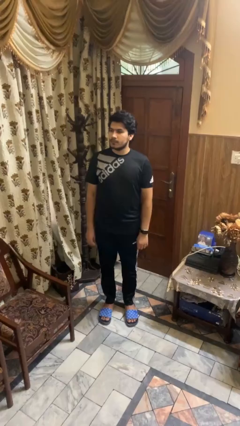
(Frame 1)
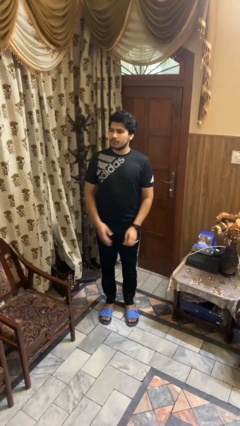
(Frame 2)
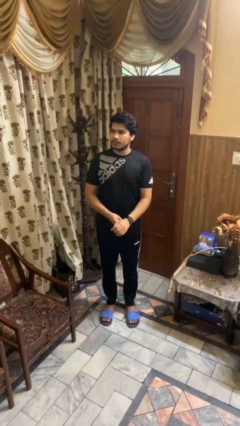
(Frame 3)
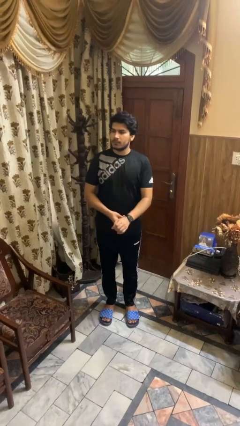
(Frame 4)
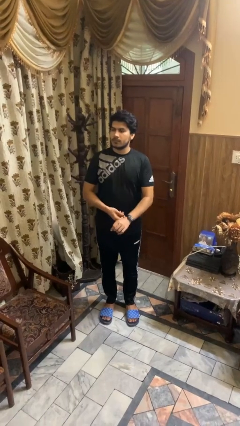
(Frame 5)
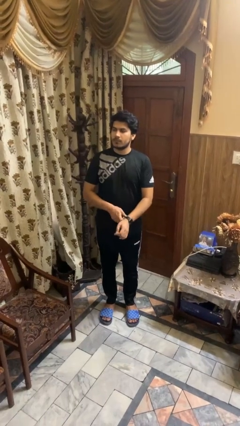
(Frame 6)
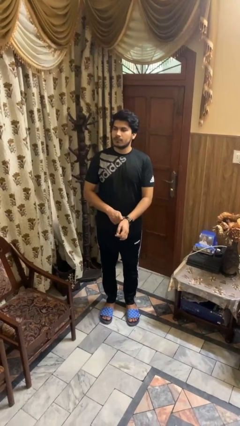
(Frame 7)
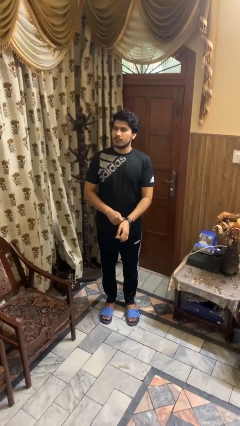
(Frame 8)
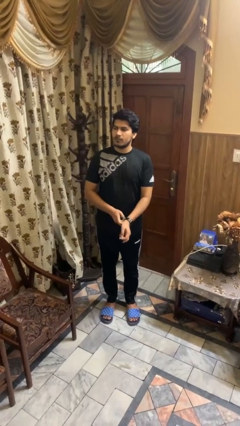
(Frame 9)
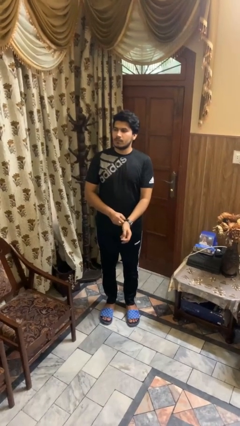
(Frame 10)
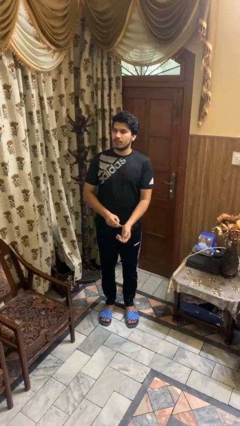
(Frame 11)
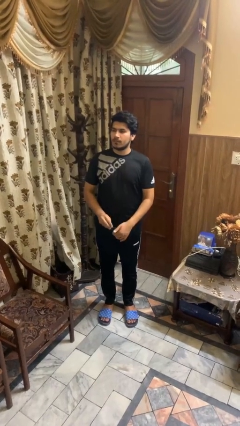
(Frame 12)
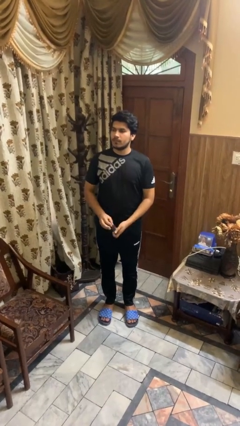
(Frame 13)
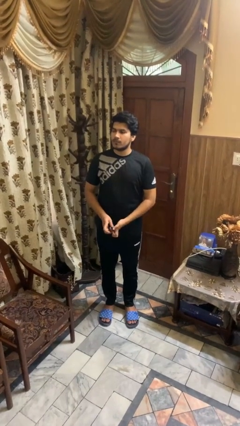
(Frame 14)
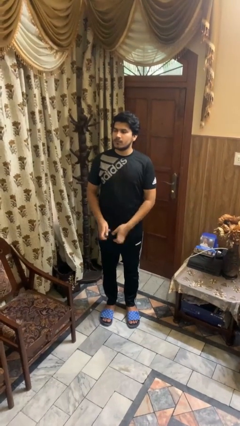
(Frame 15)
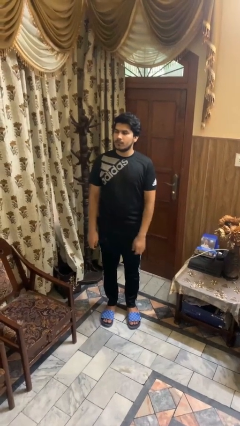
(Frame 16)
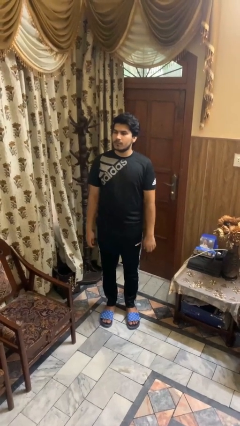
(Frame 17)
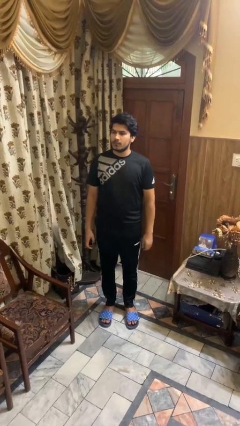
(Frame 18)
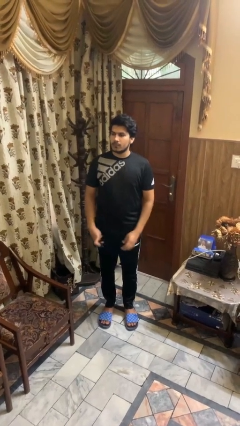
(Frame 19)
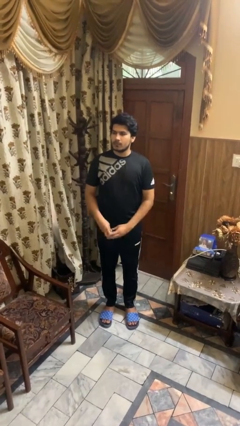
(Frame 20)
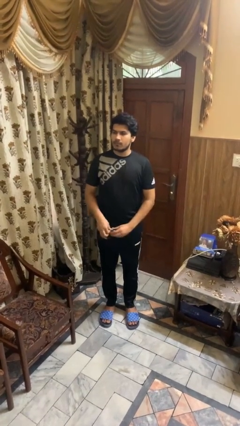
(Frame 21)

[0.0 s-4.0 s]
person takes off wristwatch

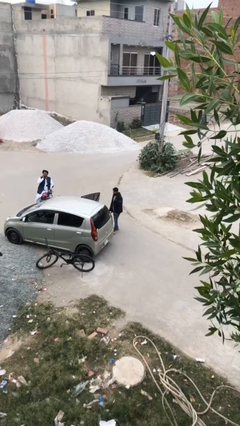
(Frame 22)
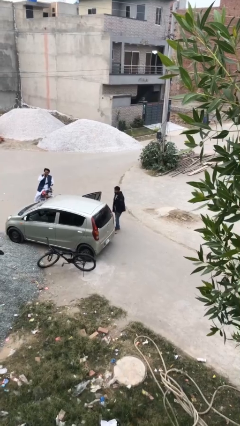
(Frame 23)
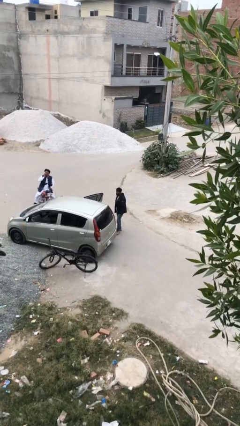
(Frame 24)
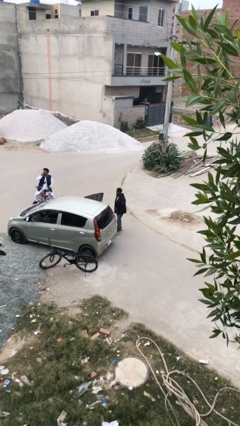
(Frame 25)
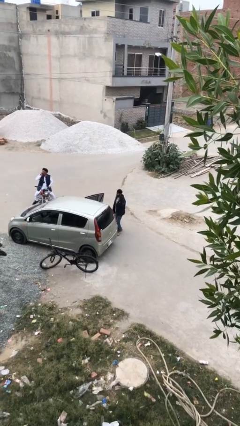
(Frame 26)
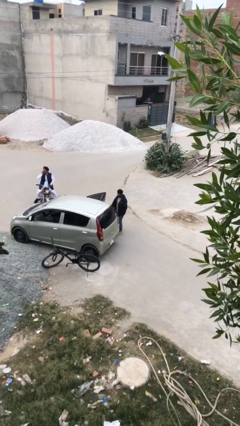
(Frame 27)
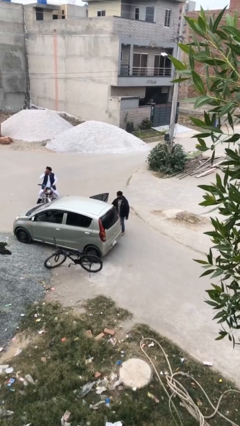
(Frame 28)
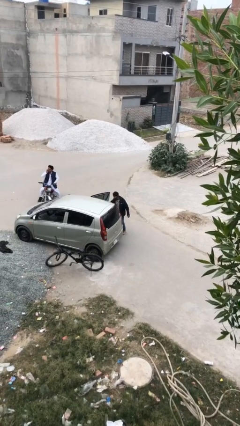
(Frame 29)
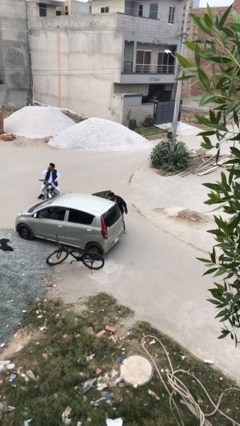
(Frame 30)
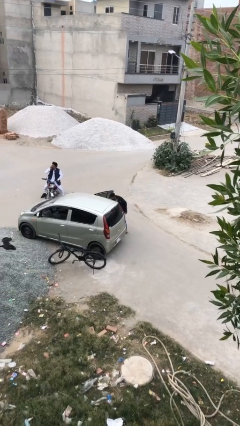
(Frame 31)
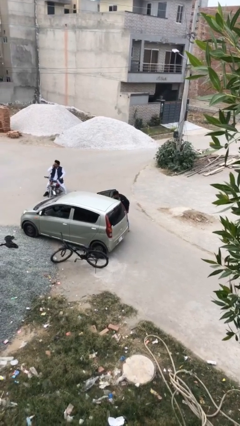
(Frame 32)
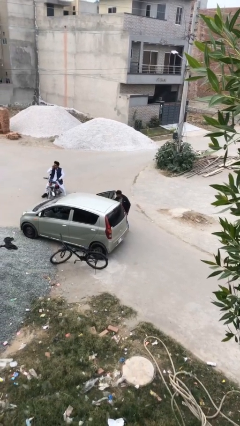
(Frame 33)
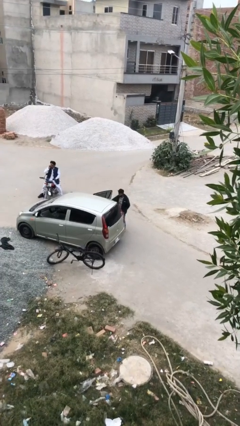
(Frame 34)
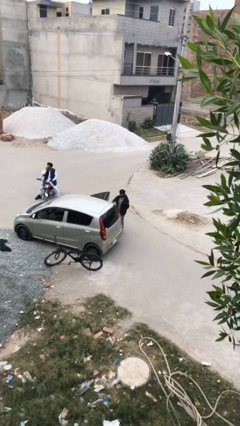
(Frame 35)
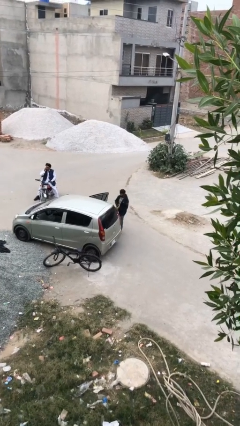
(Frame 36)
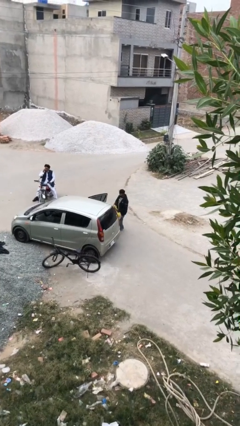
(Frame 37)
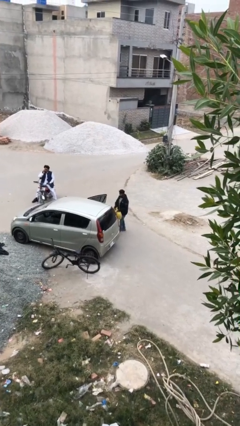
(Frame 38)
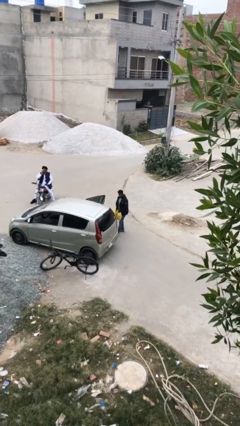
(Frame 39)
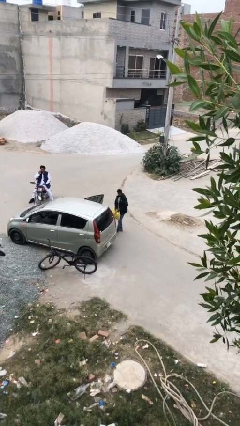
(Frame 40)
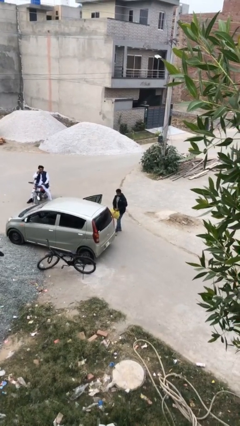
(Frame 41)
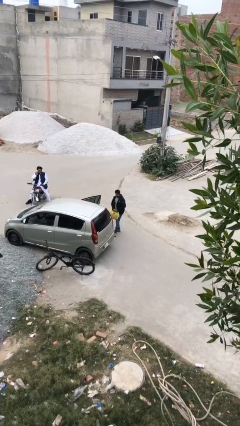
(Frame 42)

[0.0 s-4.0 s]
person unloads car

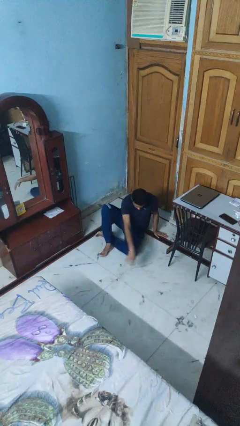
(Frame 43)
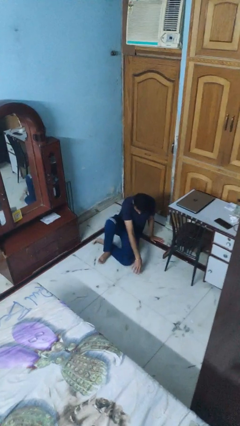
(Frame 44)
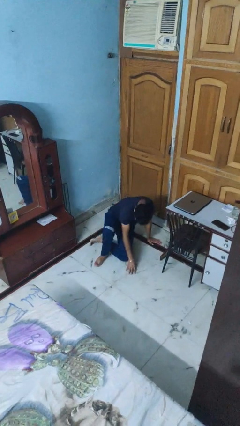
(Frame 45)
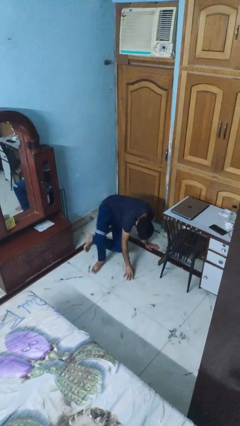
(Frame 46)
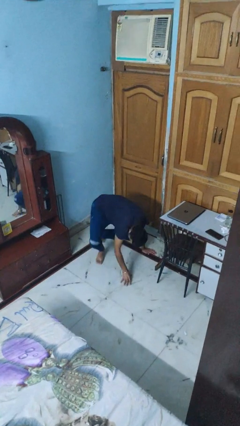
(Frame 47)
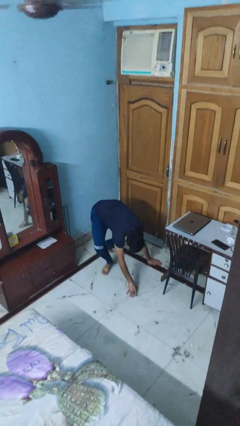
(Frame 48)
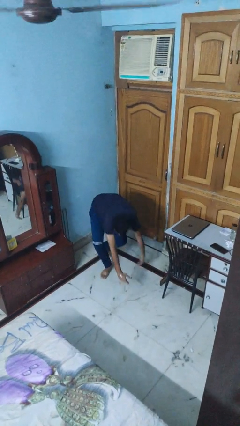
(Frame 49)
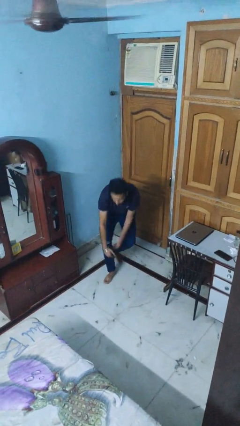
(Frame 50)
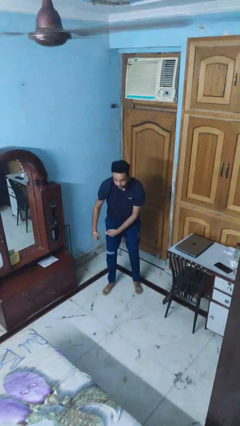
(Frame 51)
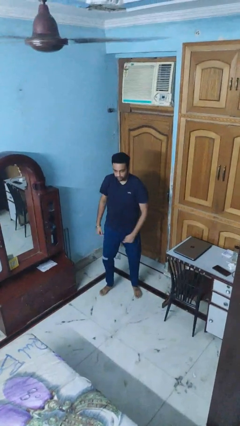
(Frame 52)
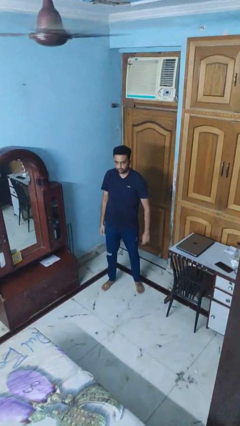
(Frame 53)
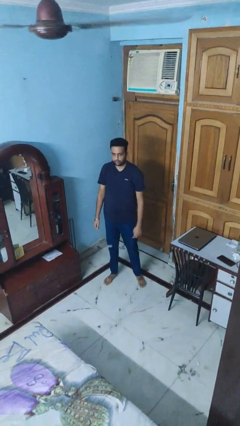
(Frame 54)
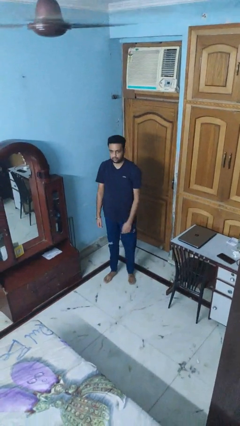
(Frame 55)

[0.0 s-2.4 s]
person stands up from floor

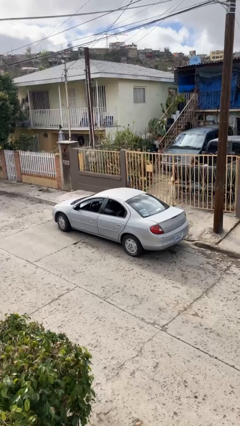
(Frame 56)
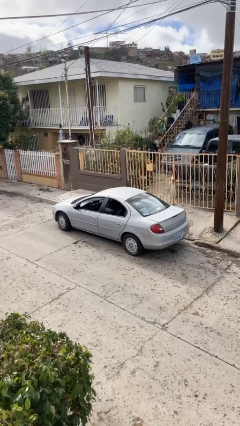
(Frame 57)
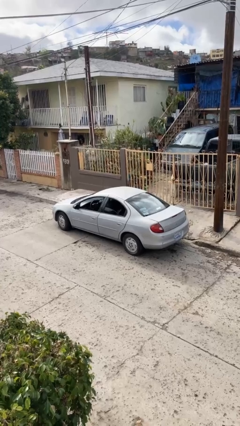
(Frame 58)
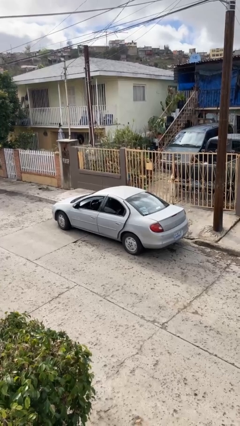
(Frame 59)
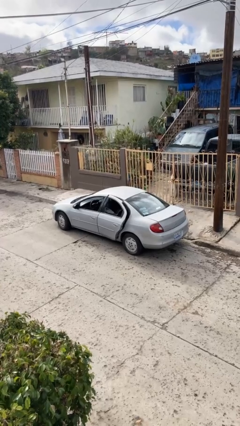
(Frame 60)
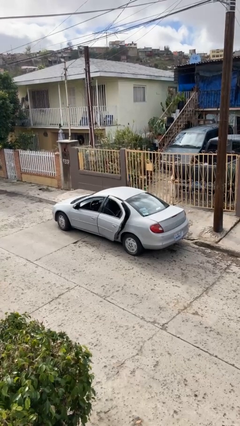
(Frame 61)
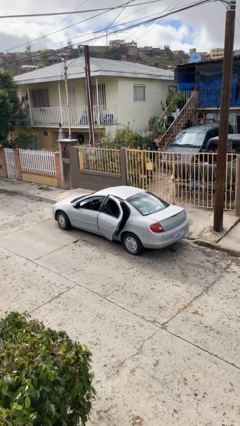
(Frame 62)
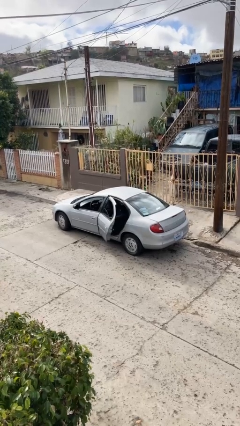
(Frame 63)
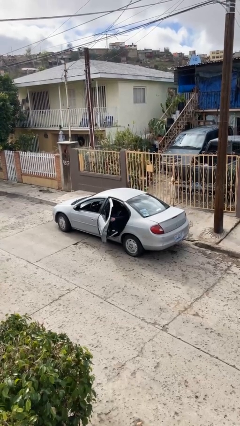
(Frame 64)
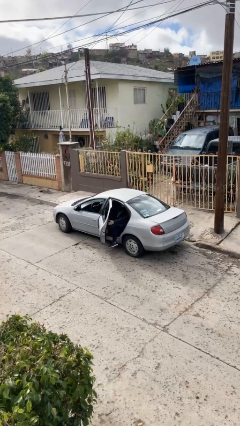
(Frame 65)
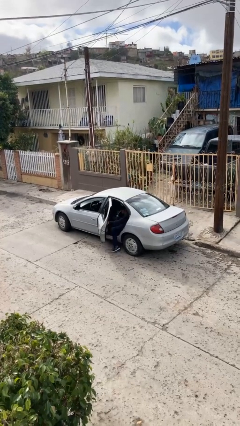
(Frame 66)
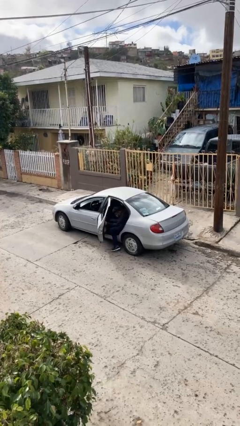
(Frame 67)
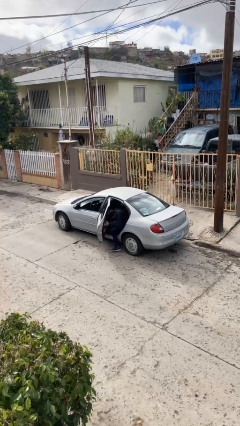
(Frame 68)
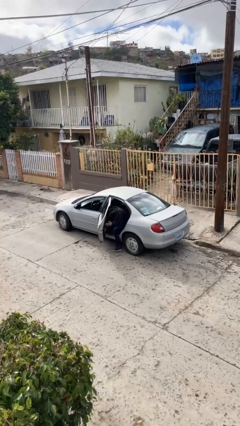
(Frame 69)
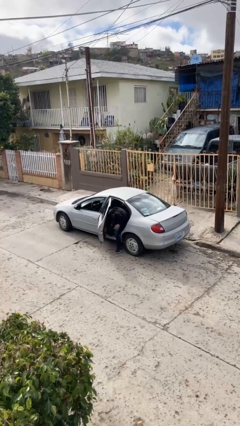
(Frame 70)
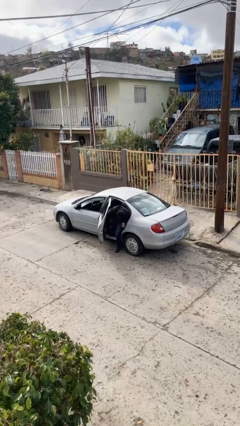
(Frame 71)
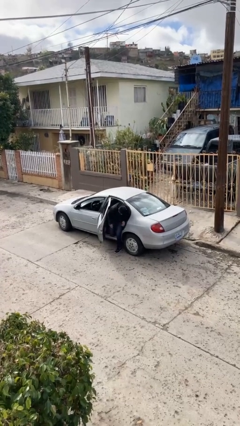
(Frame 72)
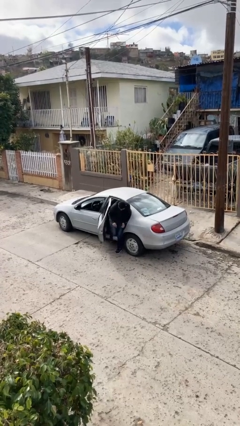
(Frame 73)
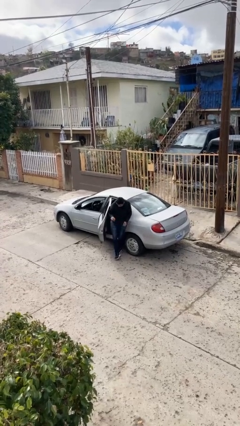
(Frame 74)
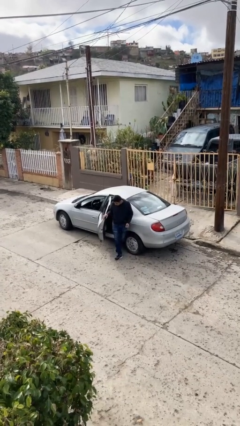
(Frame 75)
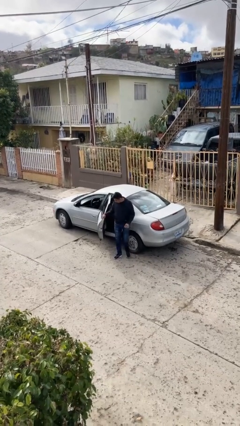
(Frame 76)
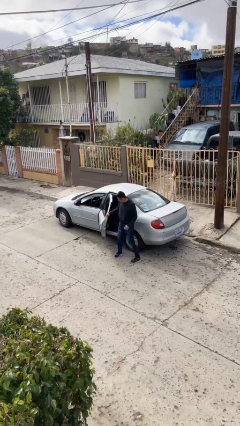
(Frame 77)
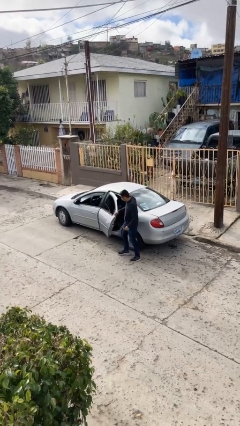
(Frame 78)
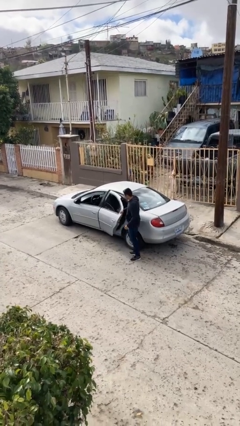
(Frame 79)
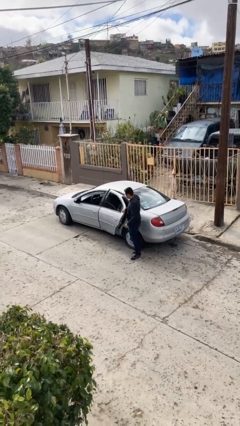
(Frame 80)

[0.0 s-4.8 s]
car drops off person

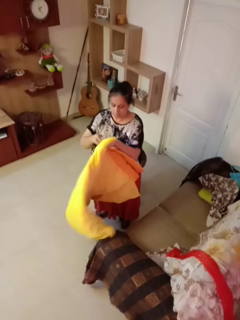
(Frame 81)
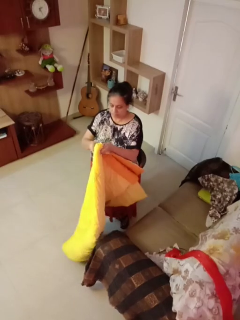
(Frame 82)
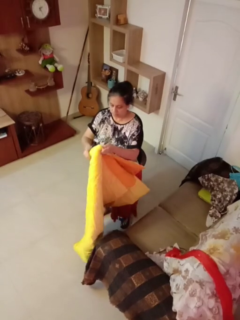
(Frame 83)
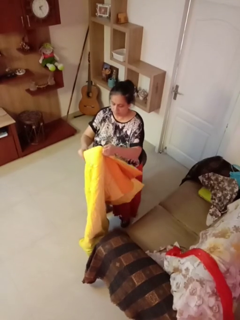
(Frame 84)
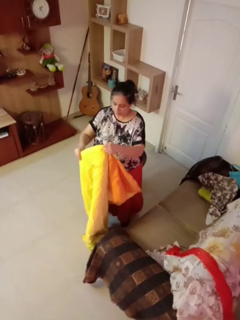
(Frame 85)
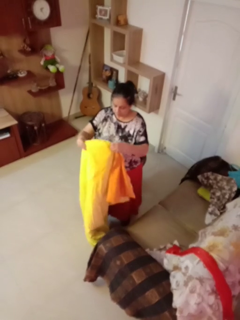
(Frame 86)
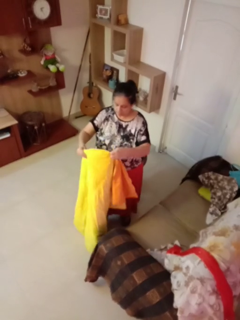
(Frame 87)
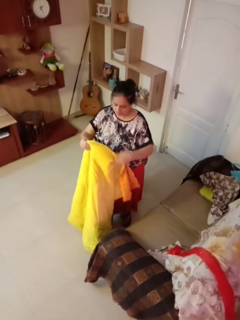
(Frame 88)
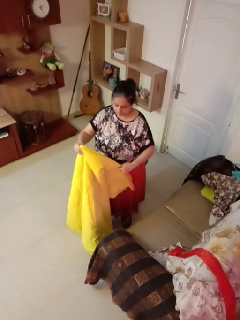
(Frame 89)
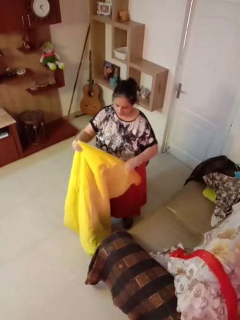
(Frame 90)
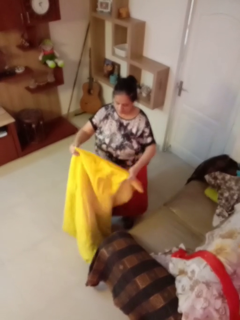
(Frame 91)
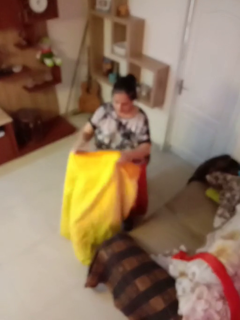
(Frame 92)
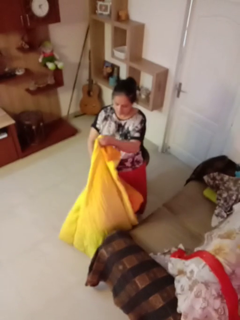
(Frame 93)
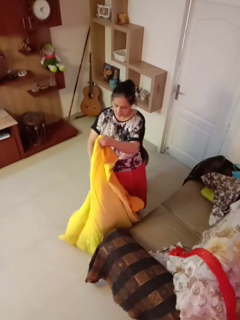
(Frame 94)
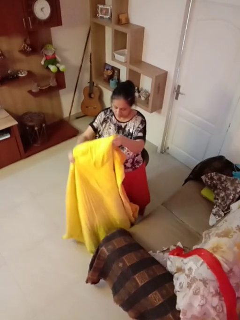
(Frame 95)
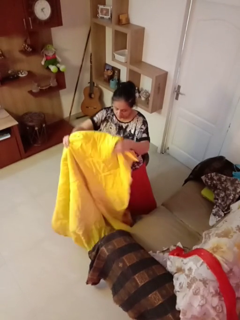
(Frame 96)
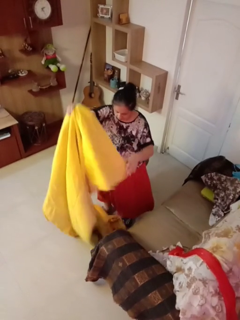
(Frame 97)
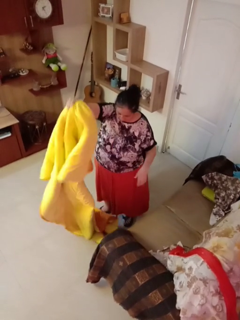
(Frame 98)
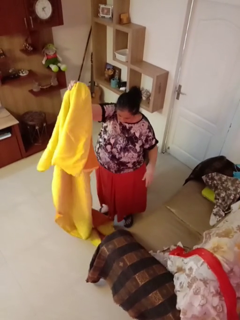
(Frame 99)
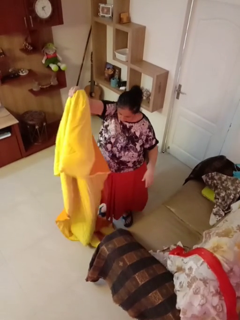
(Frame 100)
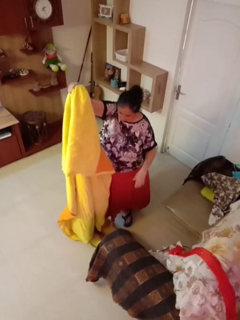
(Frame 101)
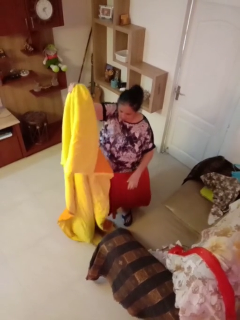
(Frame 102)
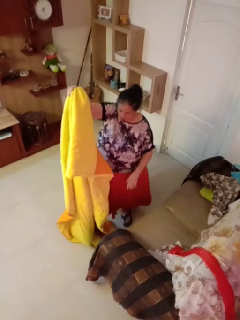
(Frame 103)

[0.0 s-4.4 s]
person unfolds blanket
